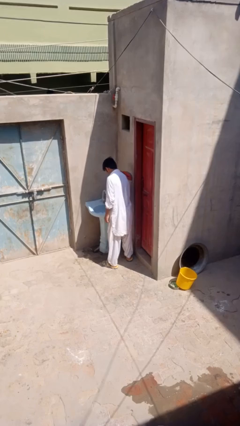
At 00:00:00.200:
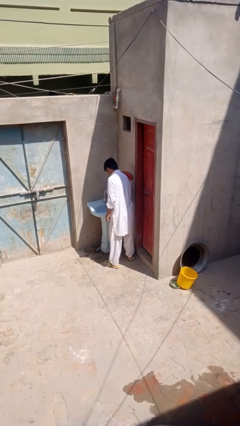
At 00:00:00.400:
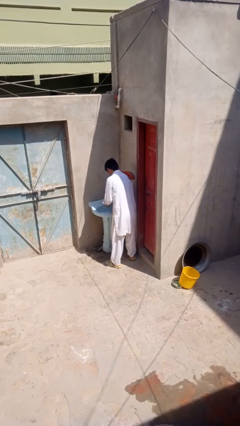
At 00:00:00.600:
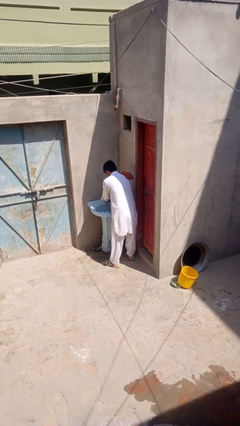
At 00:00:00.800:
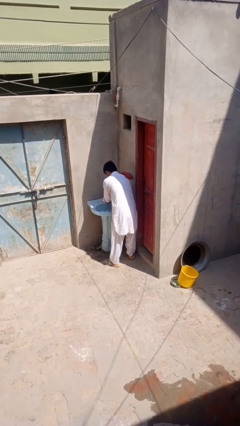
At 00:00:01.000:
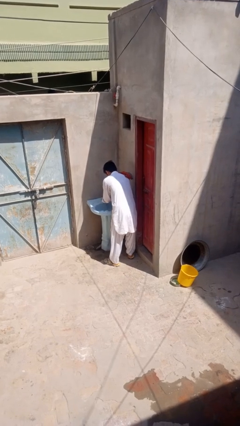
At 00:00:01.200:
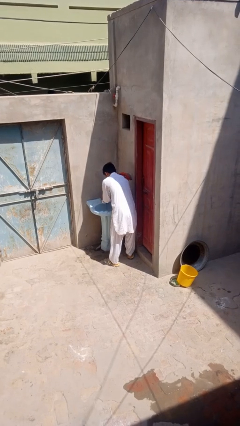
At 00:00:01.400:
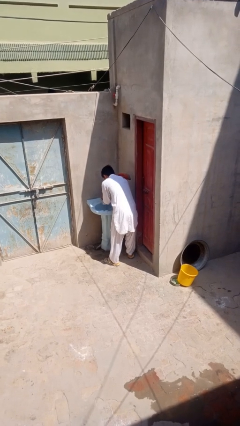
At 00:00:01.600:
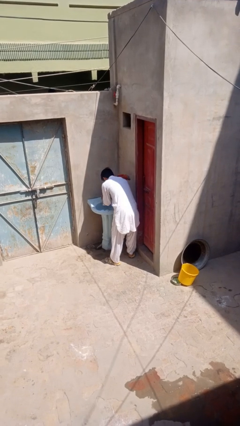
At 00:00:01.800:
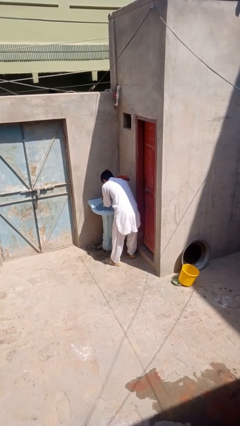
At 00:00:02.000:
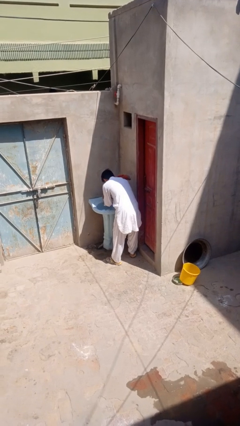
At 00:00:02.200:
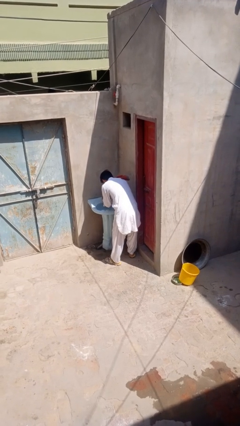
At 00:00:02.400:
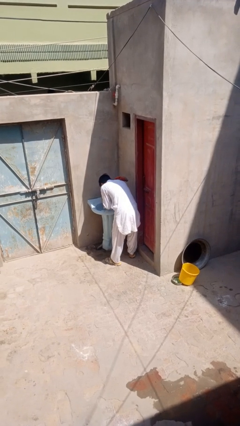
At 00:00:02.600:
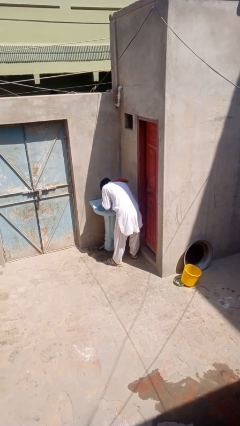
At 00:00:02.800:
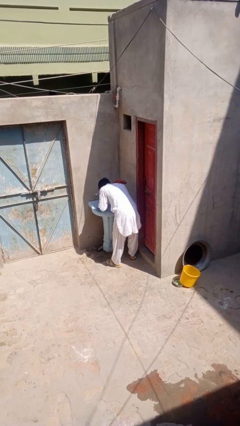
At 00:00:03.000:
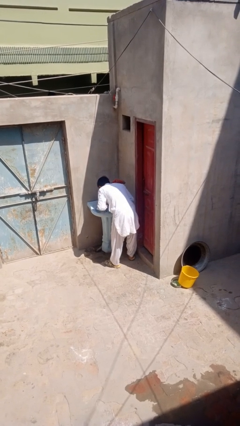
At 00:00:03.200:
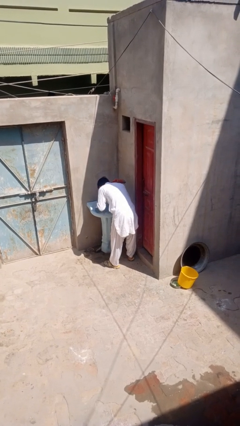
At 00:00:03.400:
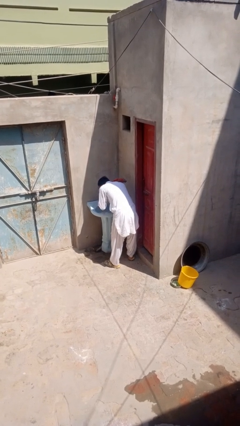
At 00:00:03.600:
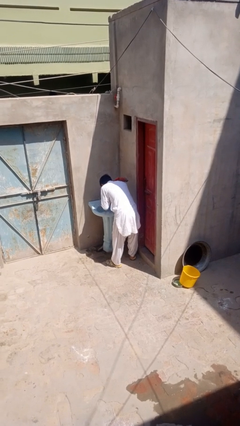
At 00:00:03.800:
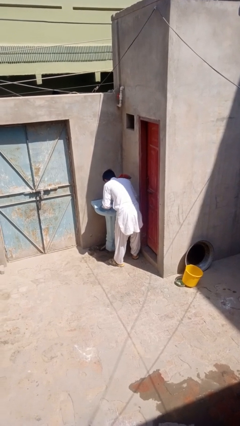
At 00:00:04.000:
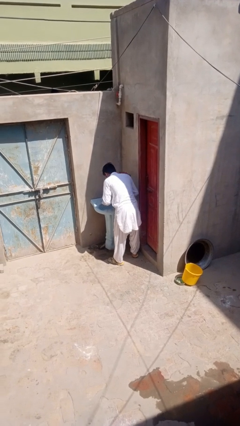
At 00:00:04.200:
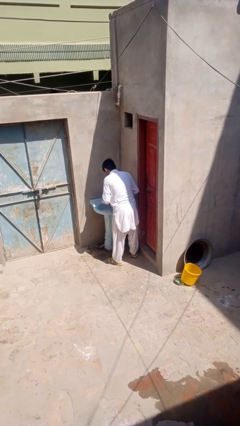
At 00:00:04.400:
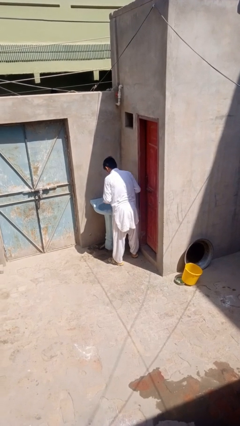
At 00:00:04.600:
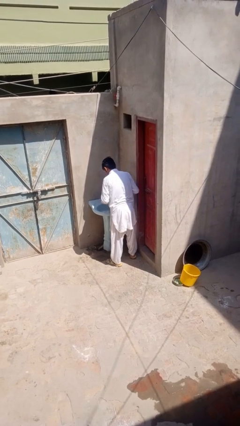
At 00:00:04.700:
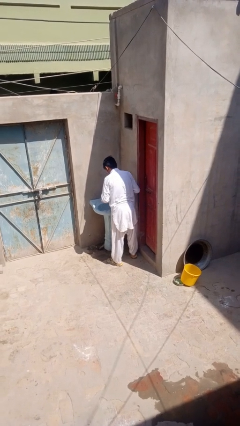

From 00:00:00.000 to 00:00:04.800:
person washes face

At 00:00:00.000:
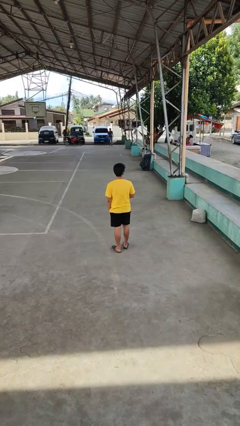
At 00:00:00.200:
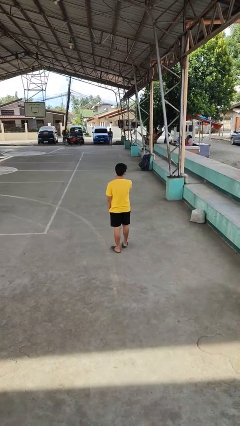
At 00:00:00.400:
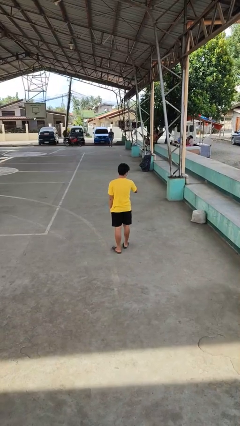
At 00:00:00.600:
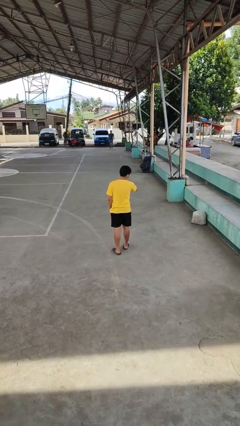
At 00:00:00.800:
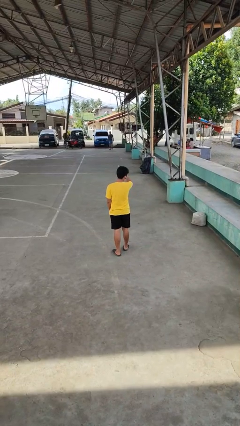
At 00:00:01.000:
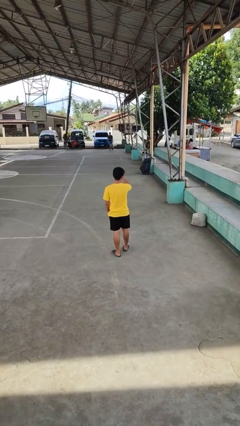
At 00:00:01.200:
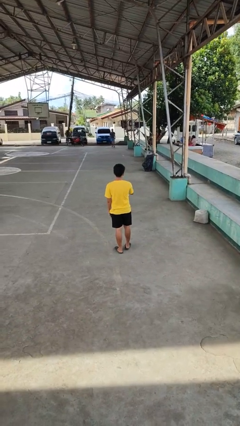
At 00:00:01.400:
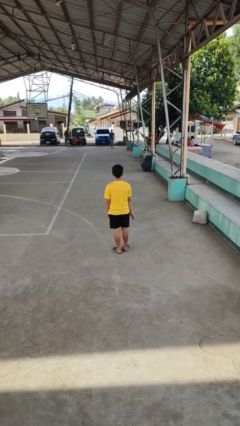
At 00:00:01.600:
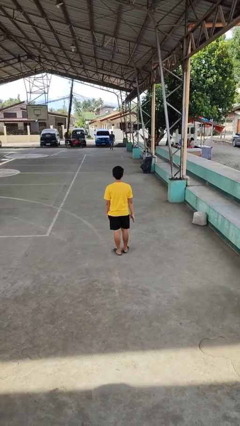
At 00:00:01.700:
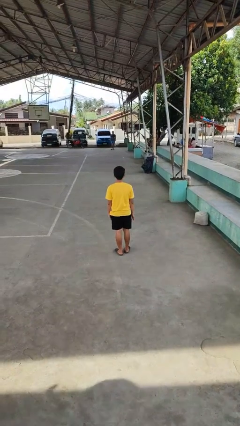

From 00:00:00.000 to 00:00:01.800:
person karate chop

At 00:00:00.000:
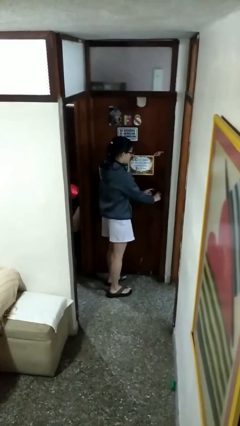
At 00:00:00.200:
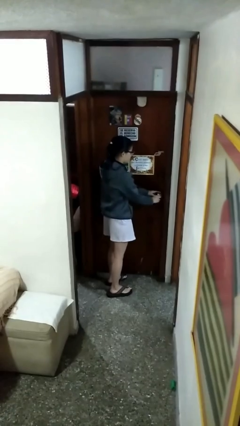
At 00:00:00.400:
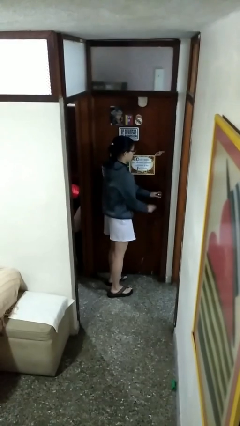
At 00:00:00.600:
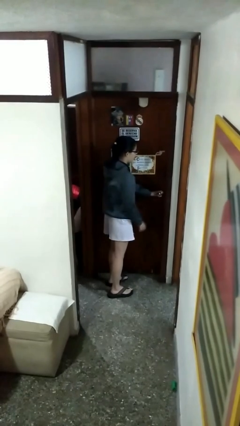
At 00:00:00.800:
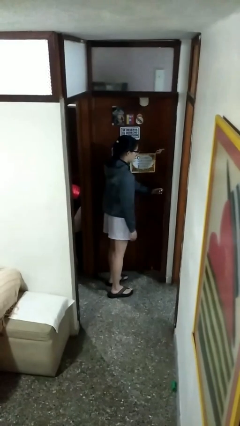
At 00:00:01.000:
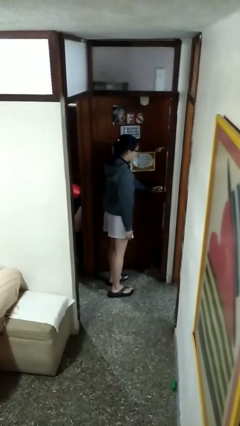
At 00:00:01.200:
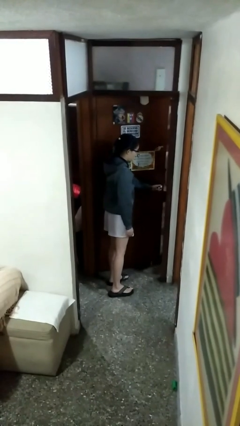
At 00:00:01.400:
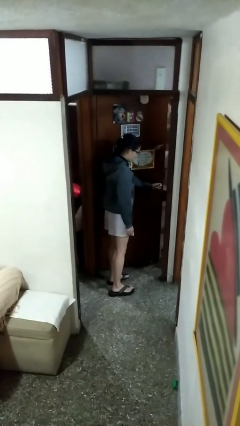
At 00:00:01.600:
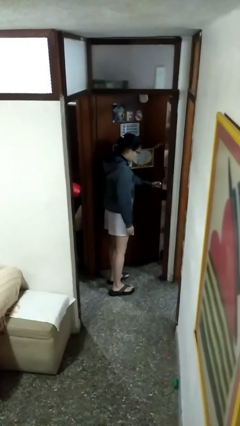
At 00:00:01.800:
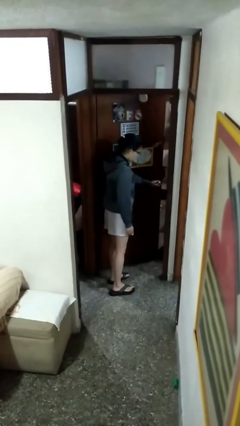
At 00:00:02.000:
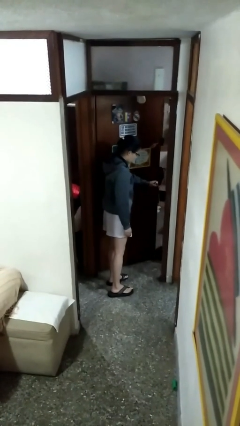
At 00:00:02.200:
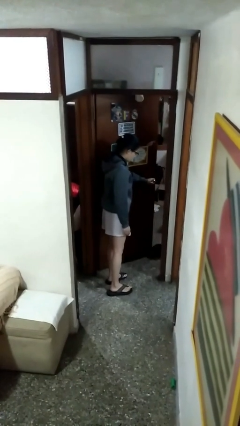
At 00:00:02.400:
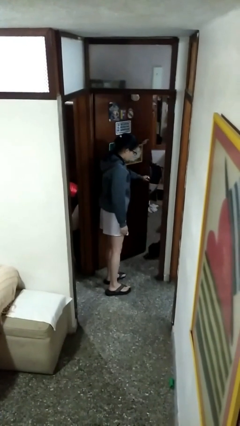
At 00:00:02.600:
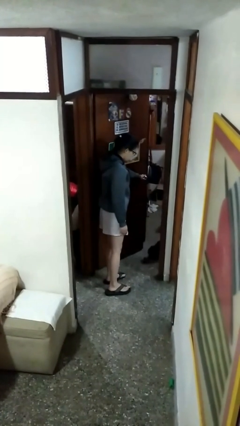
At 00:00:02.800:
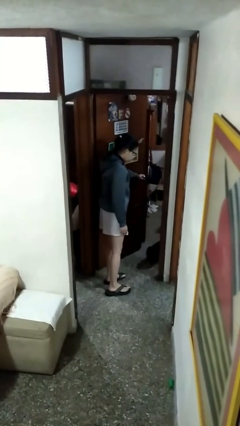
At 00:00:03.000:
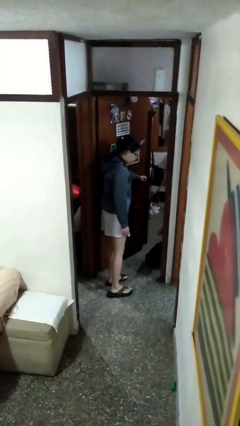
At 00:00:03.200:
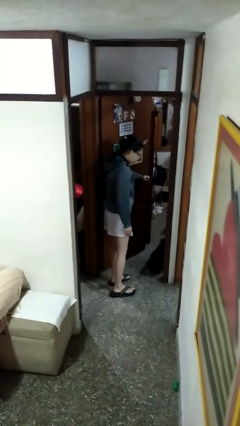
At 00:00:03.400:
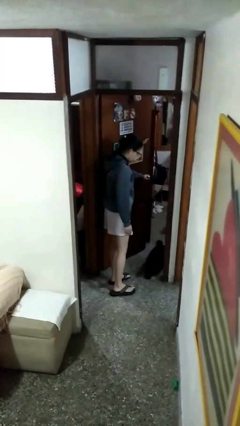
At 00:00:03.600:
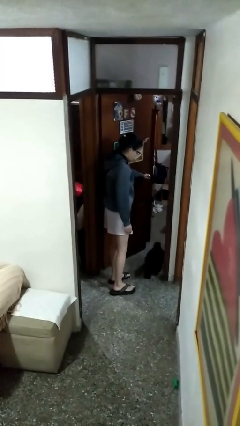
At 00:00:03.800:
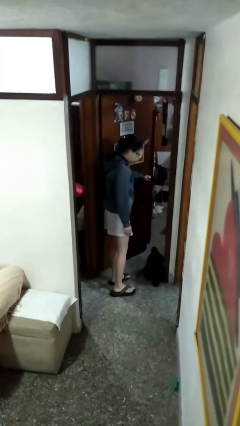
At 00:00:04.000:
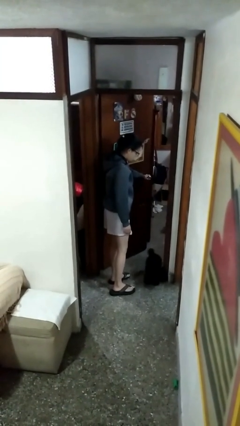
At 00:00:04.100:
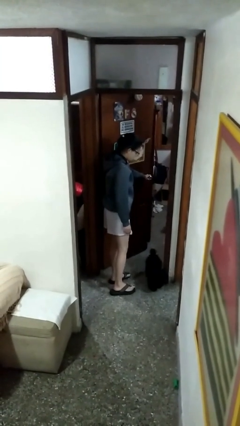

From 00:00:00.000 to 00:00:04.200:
person opens facility door

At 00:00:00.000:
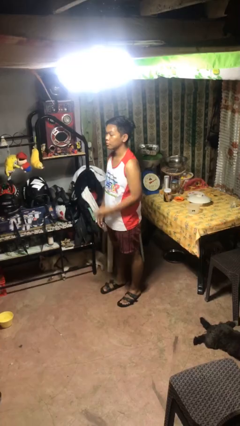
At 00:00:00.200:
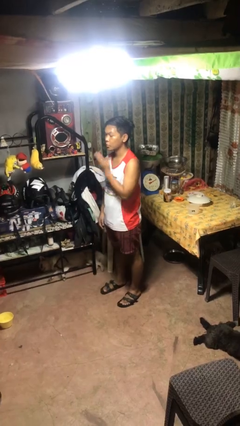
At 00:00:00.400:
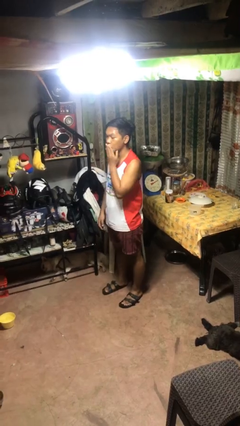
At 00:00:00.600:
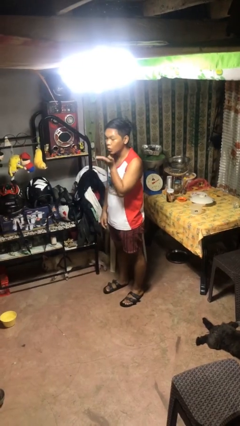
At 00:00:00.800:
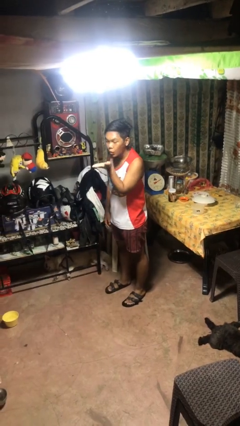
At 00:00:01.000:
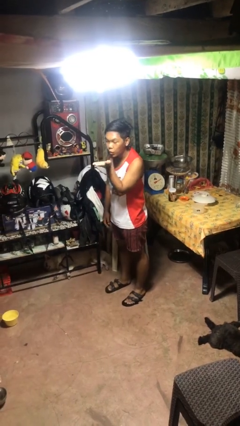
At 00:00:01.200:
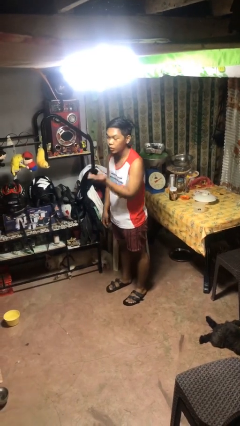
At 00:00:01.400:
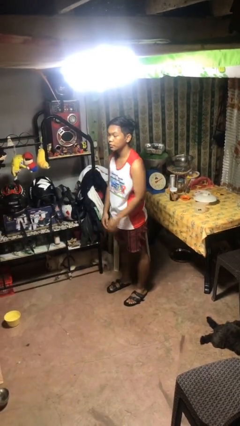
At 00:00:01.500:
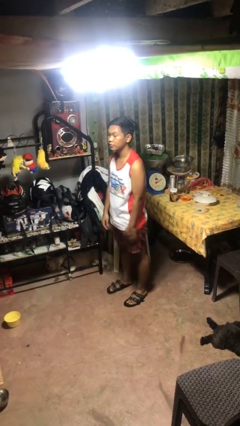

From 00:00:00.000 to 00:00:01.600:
person gestures blow kiss

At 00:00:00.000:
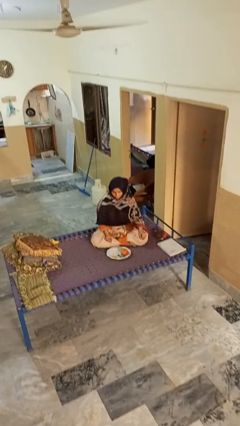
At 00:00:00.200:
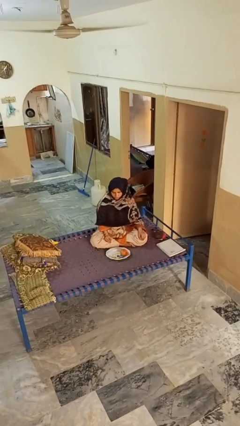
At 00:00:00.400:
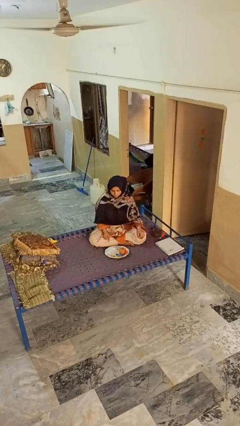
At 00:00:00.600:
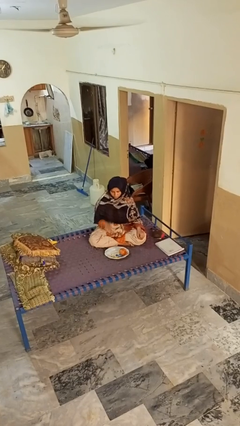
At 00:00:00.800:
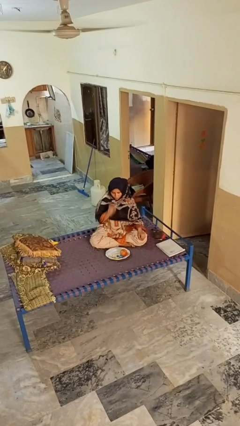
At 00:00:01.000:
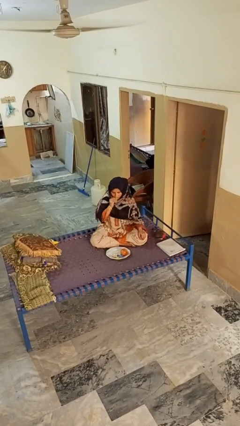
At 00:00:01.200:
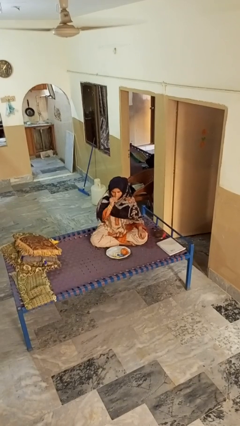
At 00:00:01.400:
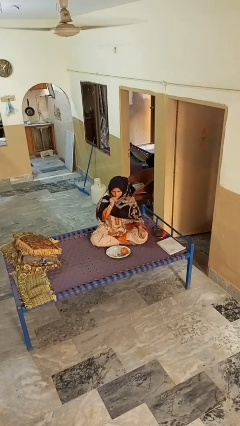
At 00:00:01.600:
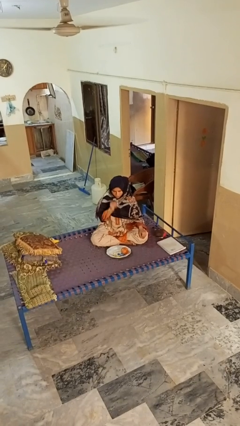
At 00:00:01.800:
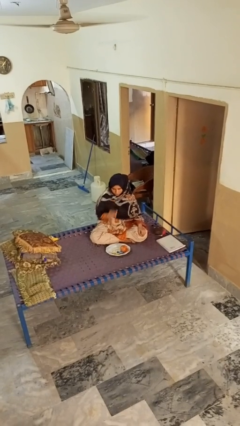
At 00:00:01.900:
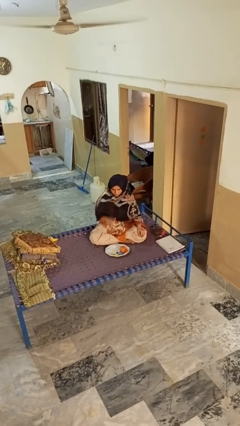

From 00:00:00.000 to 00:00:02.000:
person eats apple

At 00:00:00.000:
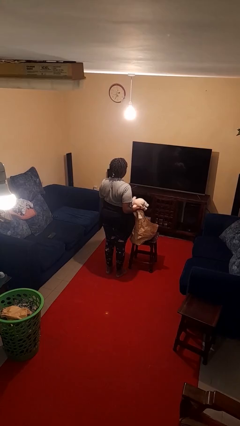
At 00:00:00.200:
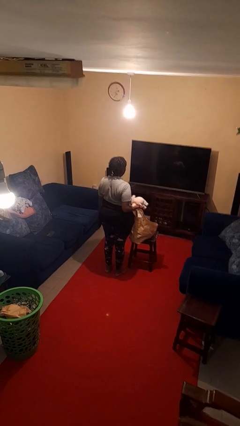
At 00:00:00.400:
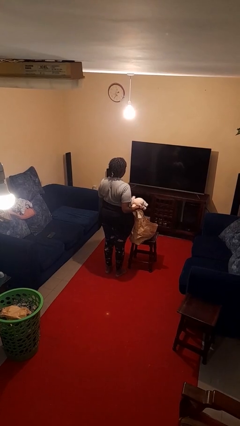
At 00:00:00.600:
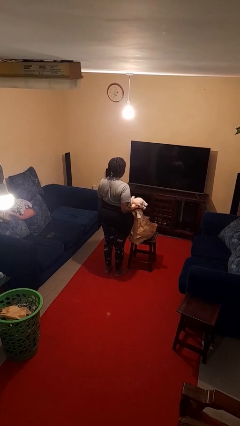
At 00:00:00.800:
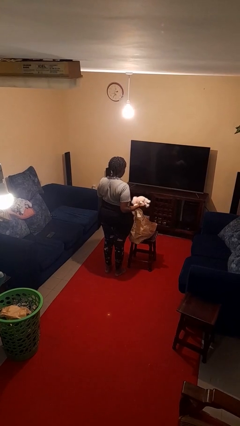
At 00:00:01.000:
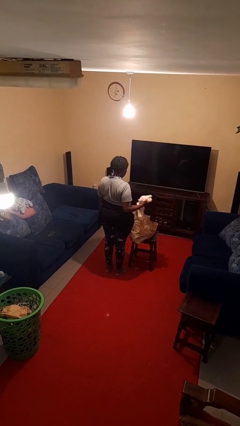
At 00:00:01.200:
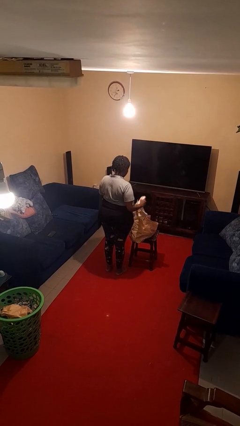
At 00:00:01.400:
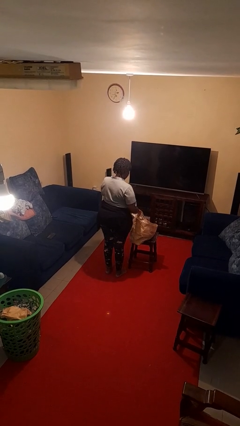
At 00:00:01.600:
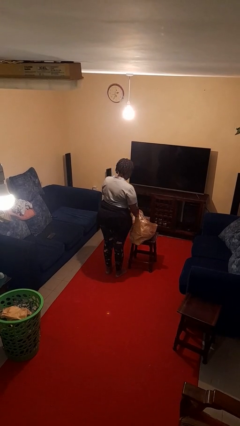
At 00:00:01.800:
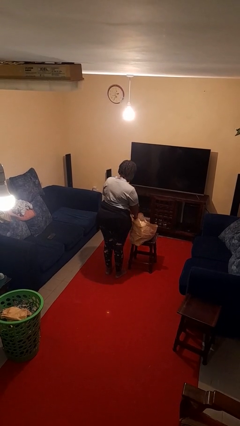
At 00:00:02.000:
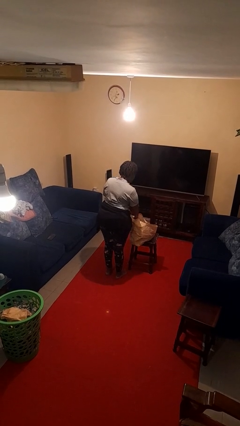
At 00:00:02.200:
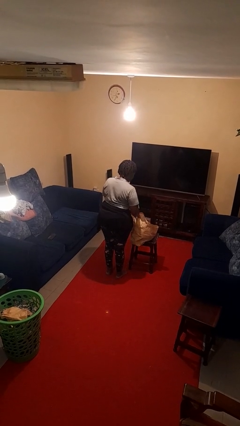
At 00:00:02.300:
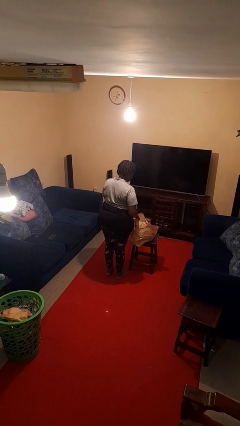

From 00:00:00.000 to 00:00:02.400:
person puts object into bag

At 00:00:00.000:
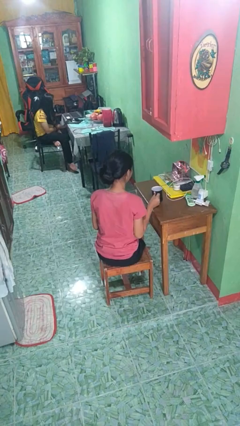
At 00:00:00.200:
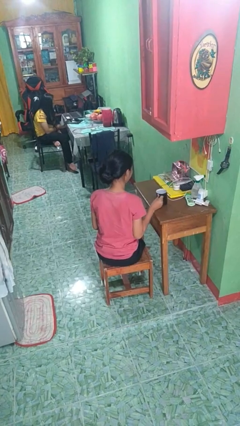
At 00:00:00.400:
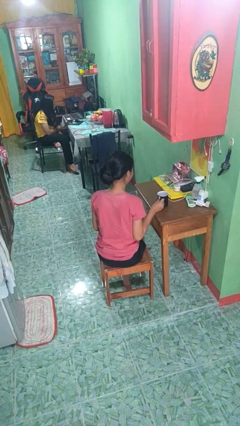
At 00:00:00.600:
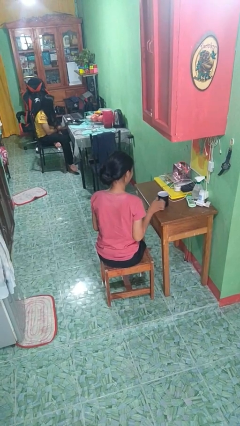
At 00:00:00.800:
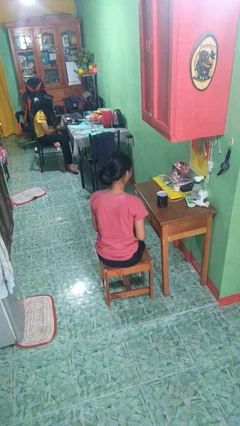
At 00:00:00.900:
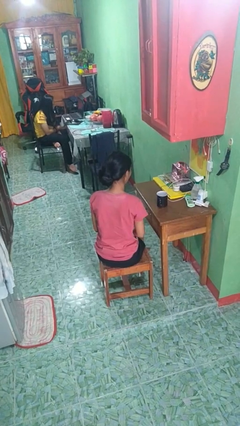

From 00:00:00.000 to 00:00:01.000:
person puts down object on table
